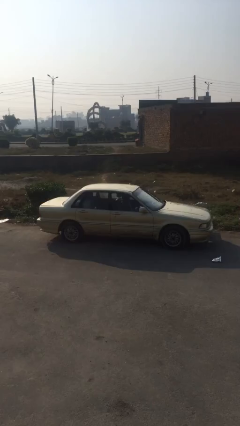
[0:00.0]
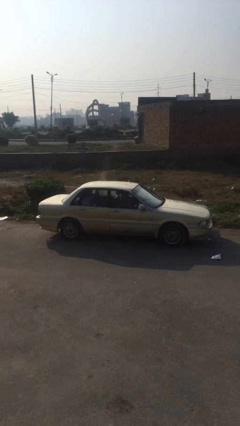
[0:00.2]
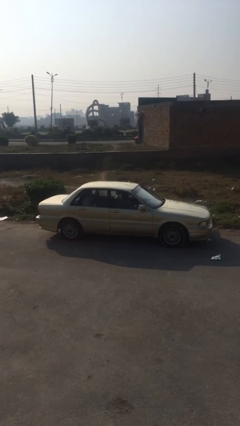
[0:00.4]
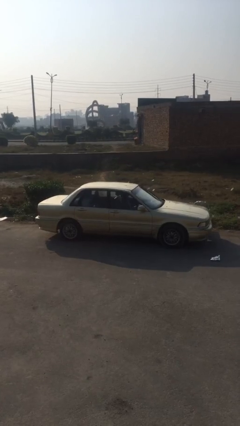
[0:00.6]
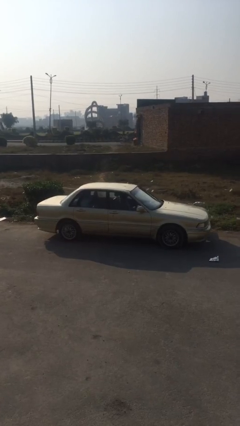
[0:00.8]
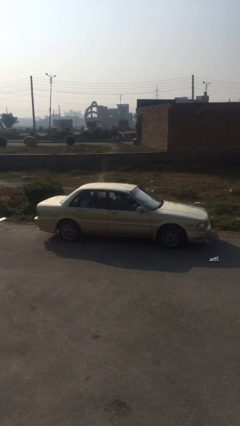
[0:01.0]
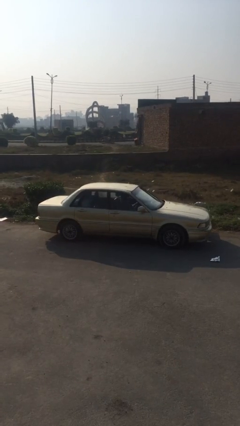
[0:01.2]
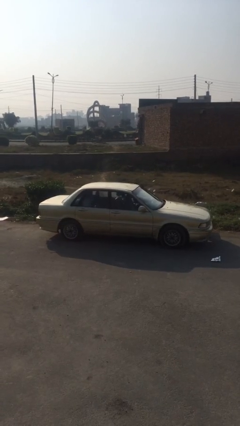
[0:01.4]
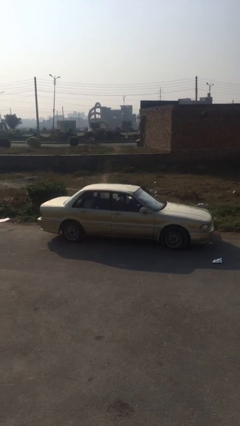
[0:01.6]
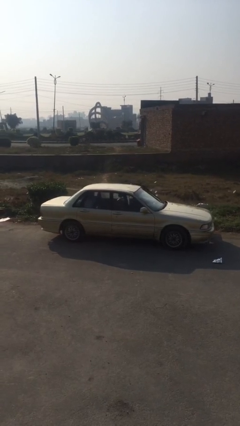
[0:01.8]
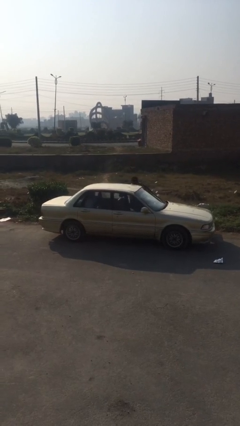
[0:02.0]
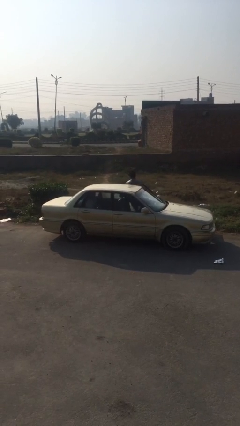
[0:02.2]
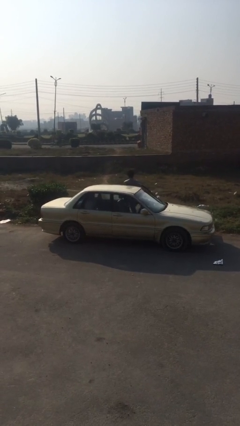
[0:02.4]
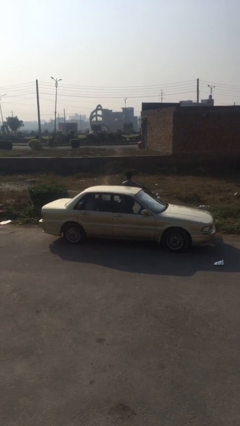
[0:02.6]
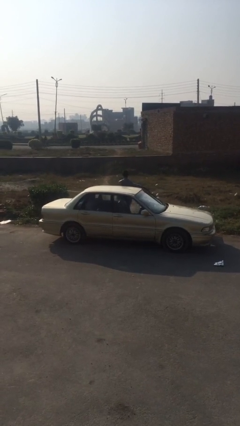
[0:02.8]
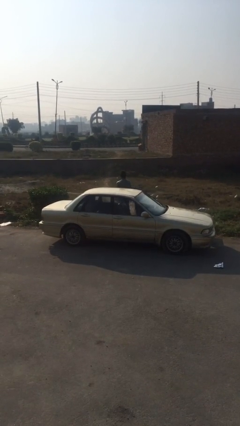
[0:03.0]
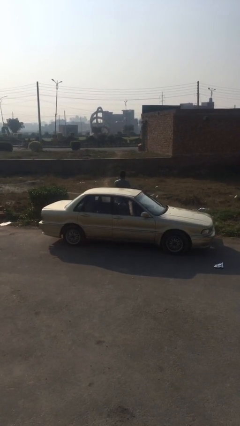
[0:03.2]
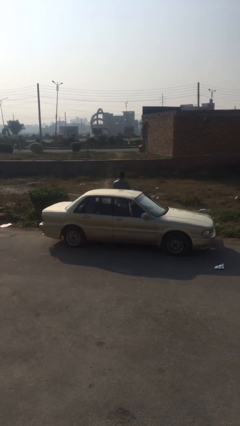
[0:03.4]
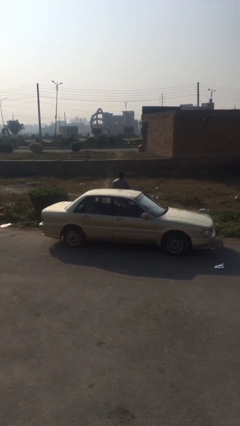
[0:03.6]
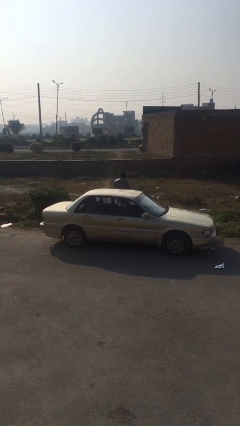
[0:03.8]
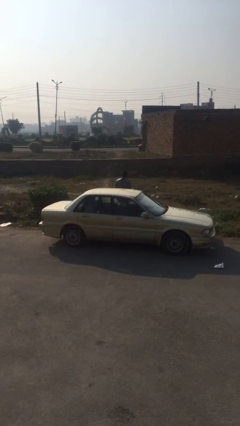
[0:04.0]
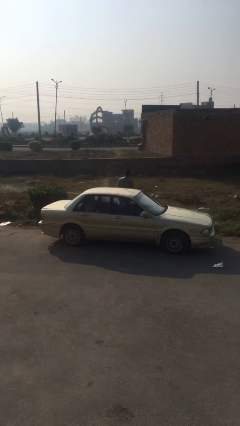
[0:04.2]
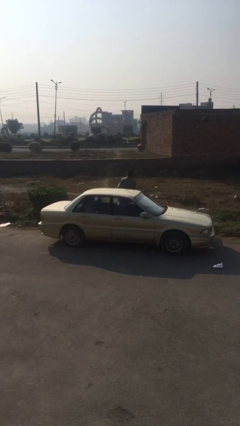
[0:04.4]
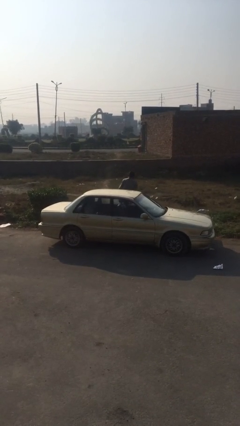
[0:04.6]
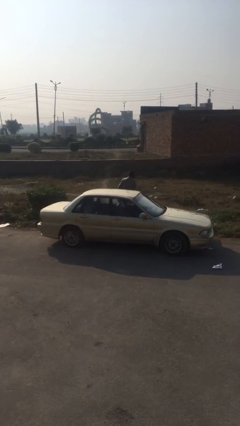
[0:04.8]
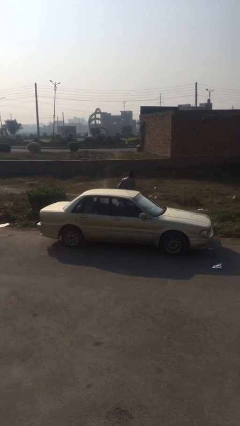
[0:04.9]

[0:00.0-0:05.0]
car drops off person

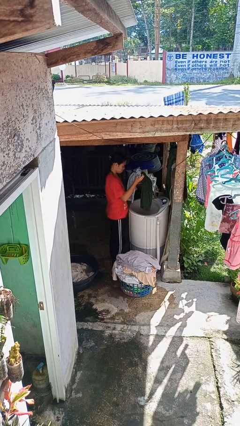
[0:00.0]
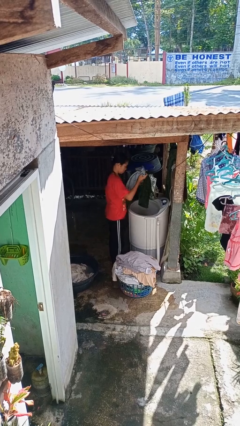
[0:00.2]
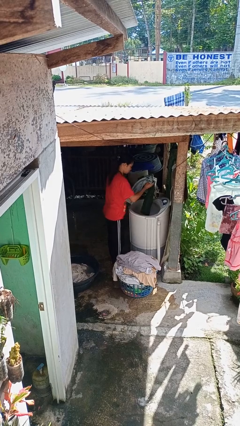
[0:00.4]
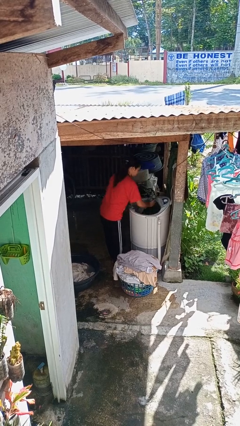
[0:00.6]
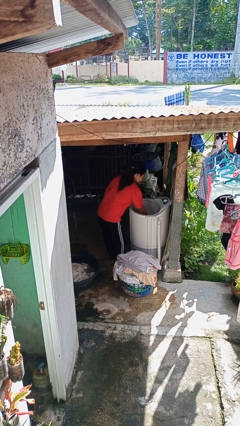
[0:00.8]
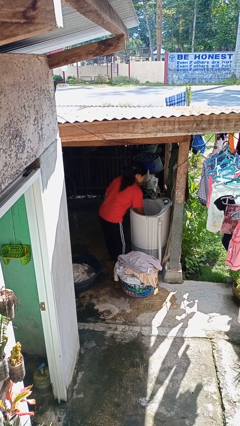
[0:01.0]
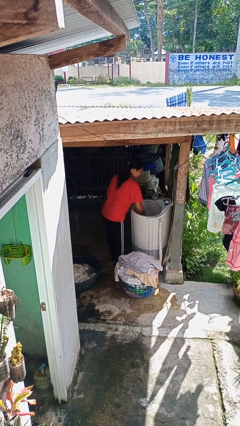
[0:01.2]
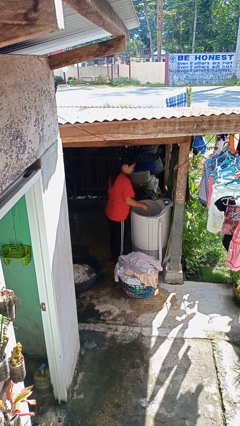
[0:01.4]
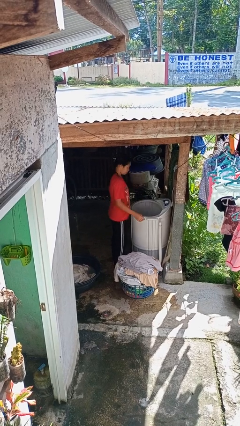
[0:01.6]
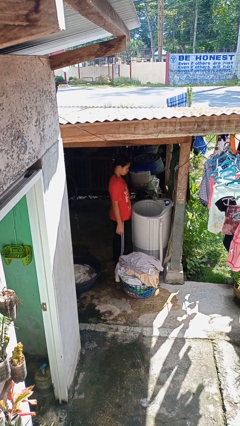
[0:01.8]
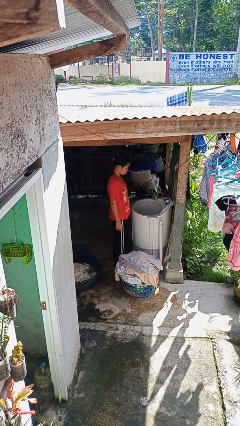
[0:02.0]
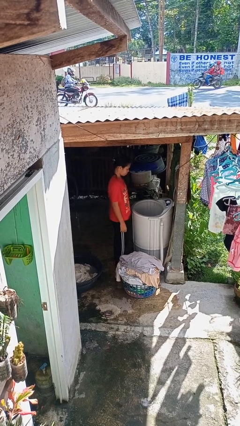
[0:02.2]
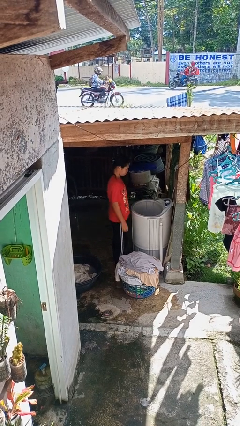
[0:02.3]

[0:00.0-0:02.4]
person loads clotheswasher

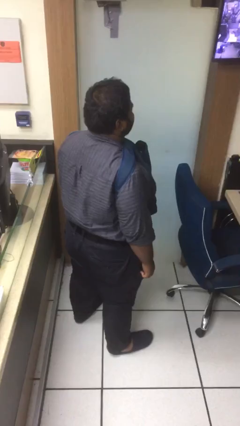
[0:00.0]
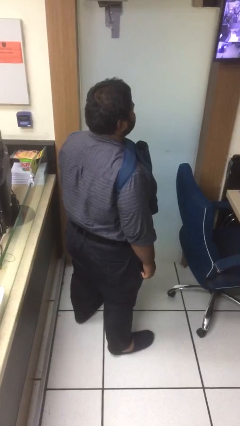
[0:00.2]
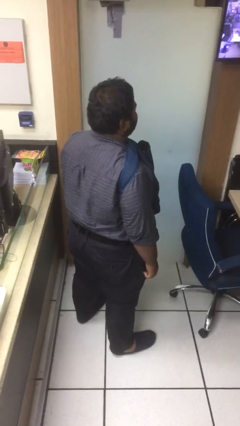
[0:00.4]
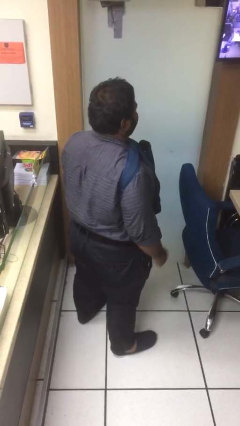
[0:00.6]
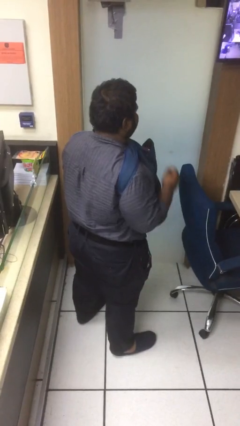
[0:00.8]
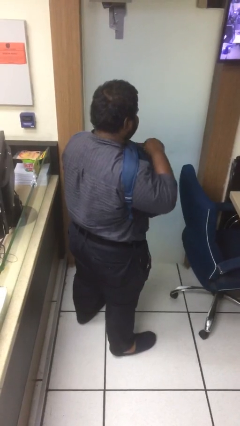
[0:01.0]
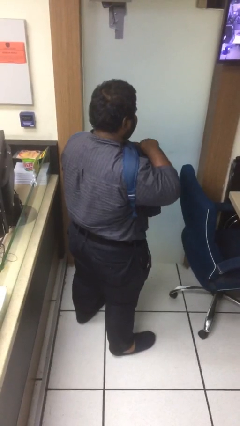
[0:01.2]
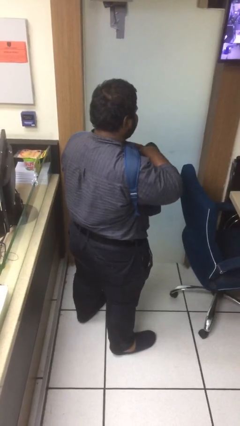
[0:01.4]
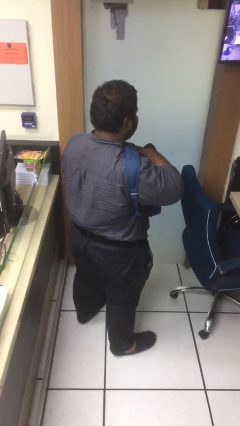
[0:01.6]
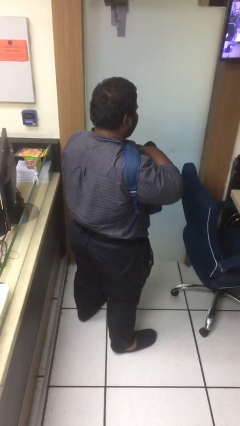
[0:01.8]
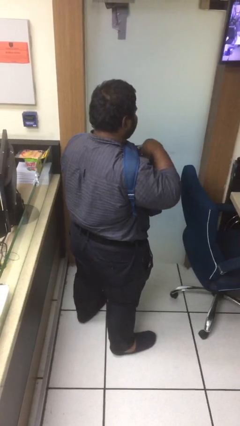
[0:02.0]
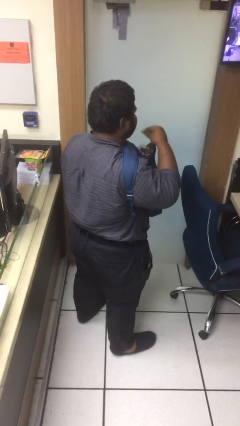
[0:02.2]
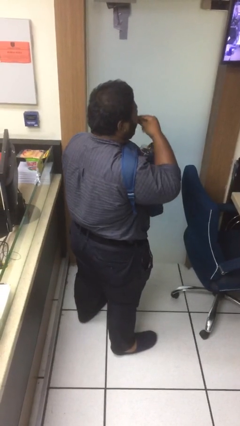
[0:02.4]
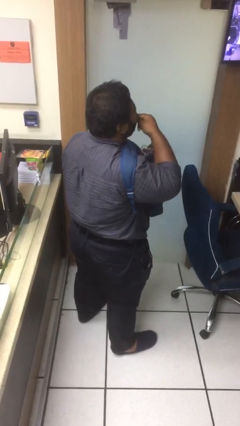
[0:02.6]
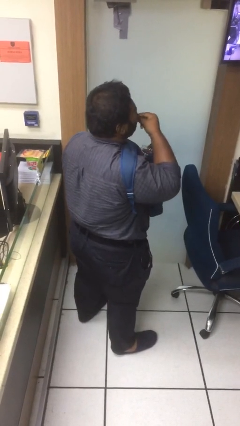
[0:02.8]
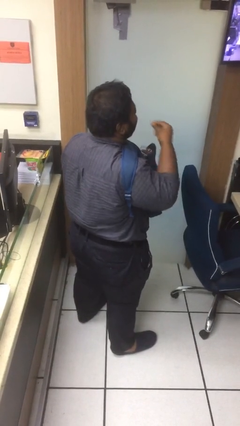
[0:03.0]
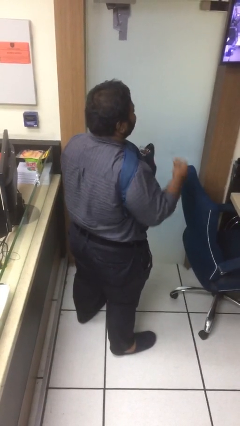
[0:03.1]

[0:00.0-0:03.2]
person eats snack from bag

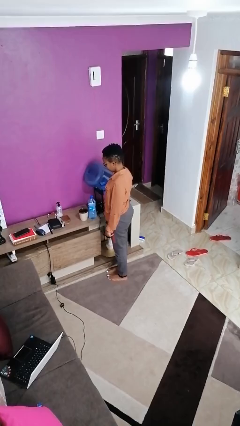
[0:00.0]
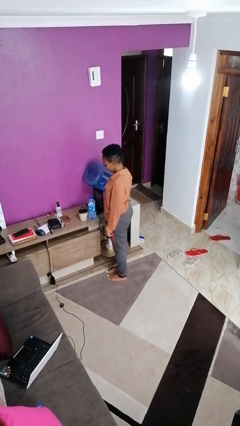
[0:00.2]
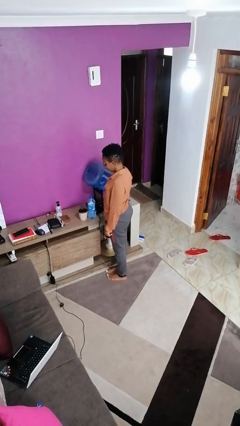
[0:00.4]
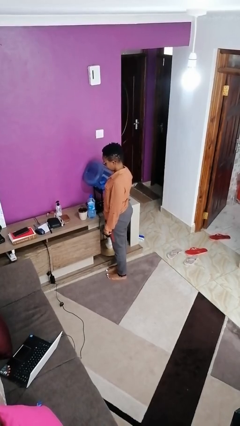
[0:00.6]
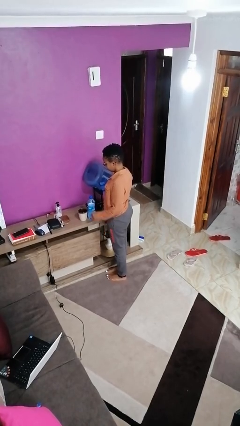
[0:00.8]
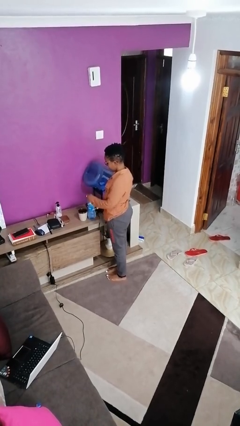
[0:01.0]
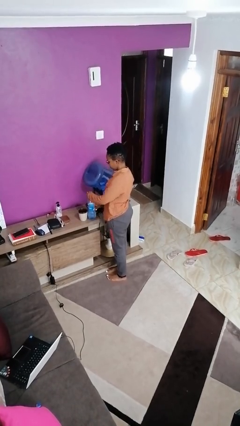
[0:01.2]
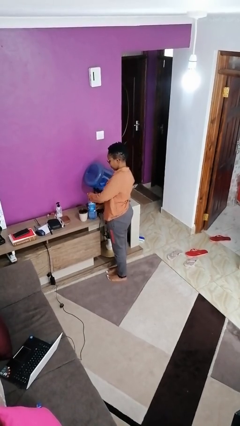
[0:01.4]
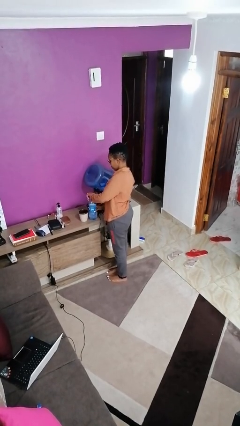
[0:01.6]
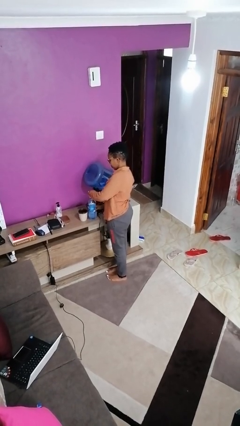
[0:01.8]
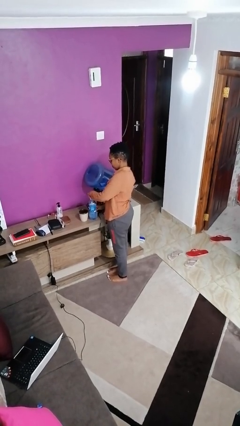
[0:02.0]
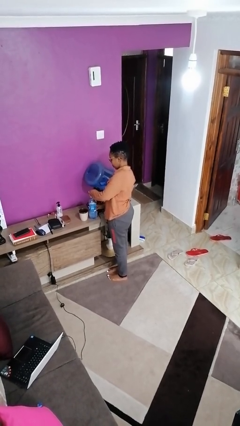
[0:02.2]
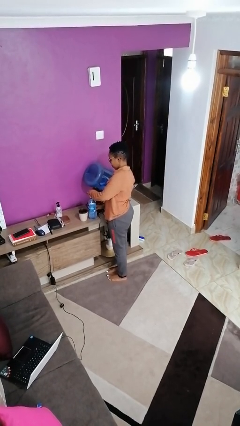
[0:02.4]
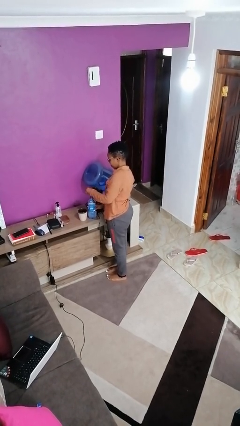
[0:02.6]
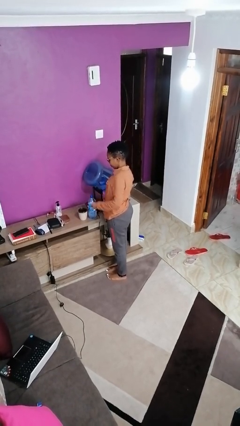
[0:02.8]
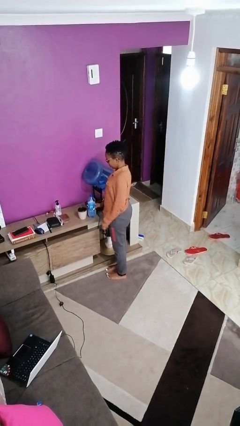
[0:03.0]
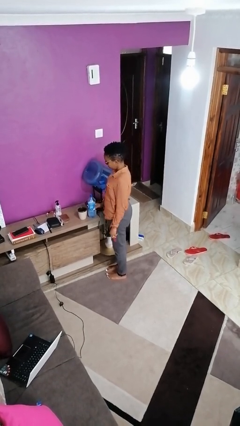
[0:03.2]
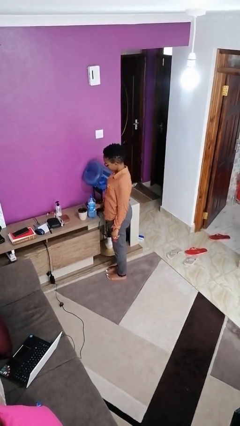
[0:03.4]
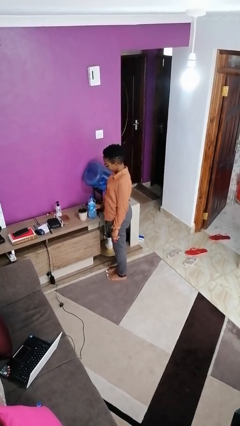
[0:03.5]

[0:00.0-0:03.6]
person unscrews lid from bottle

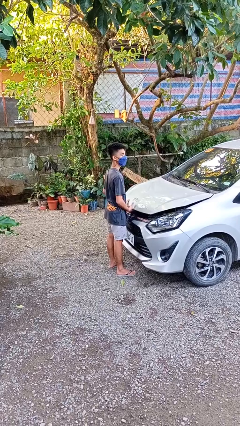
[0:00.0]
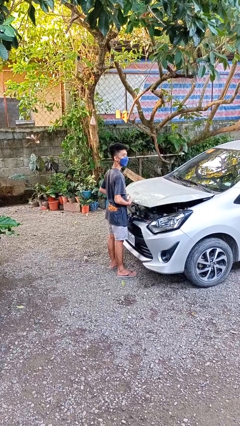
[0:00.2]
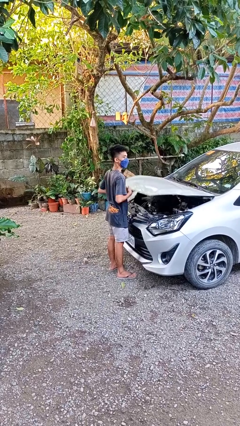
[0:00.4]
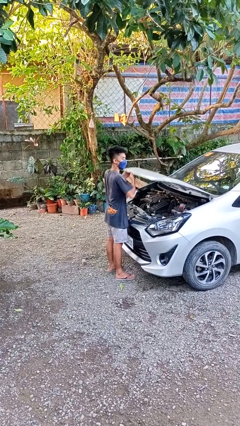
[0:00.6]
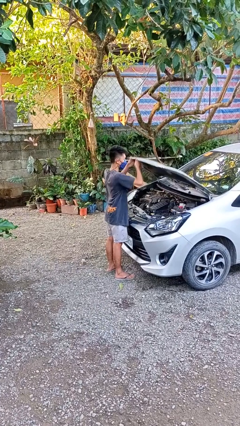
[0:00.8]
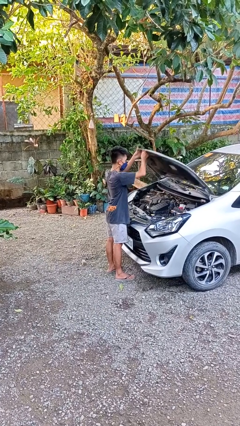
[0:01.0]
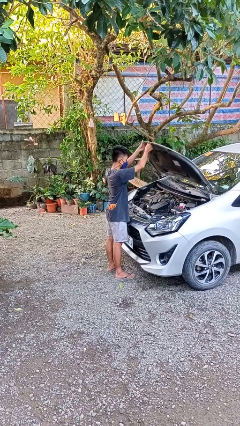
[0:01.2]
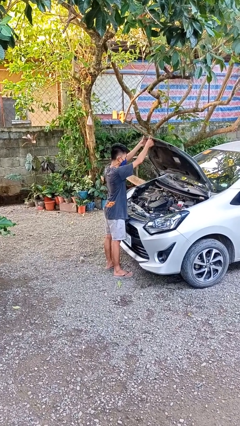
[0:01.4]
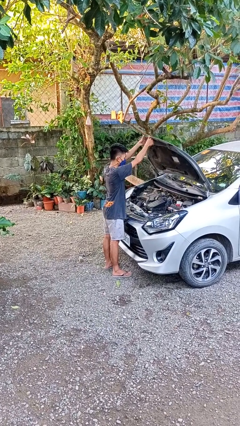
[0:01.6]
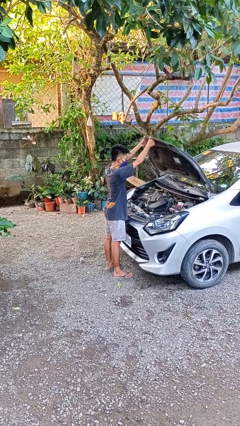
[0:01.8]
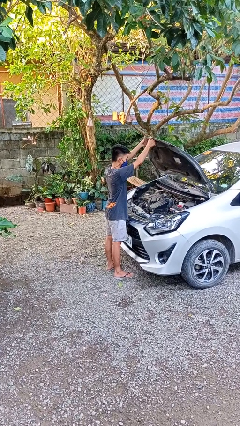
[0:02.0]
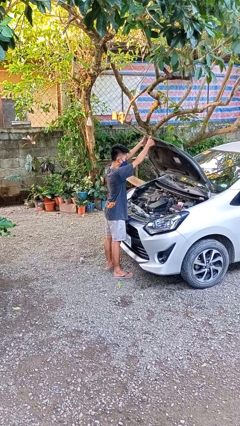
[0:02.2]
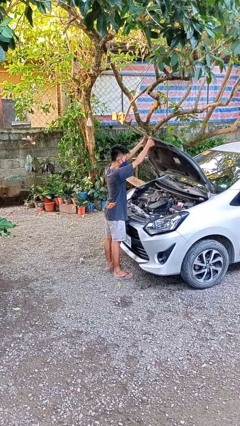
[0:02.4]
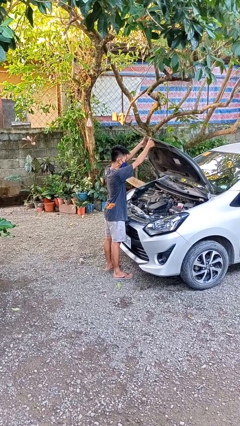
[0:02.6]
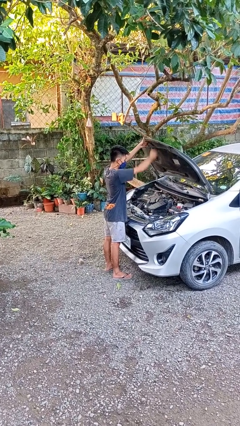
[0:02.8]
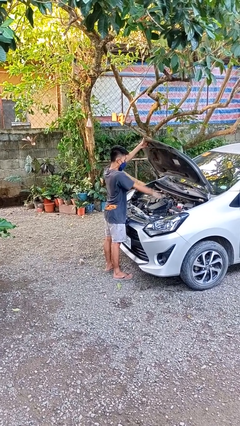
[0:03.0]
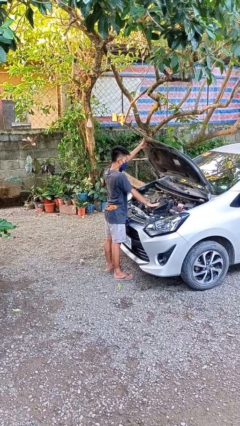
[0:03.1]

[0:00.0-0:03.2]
person opens car hood
